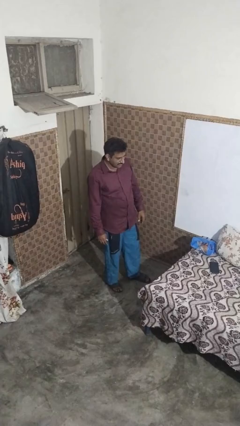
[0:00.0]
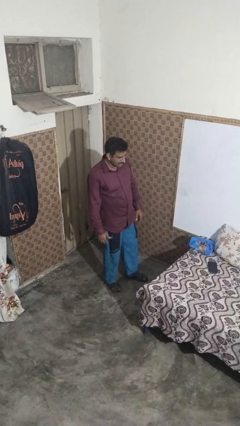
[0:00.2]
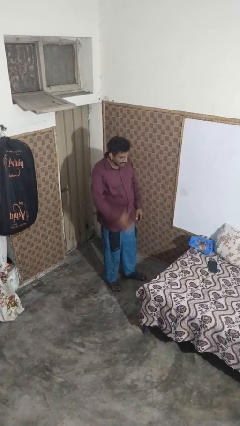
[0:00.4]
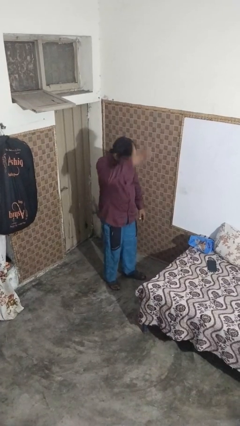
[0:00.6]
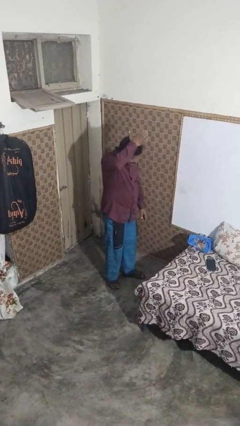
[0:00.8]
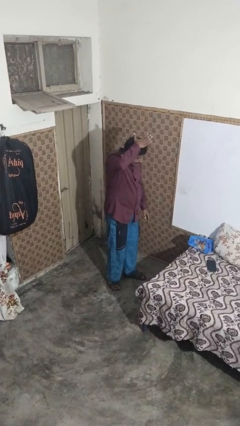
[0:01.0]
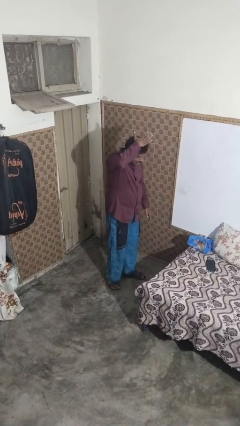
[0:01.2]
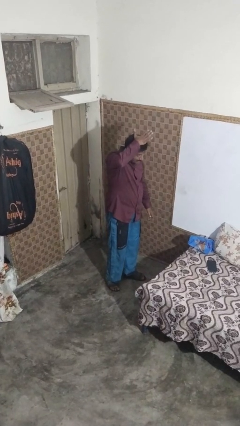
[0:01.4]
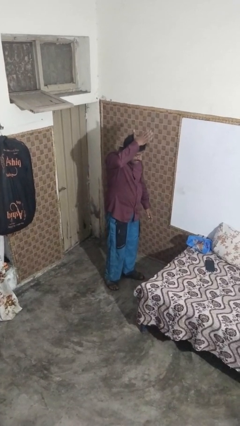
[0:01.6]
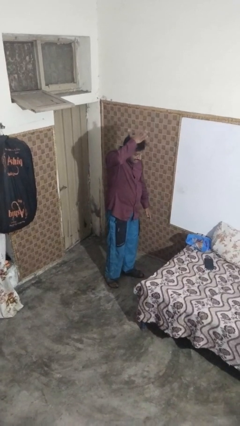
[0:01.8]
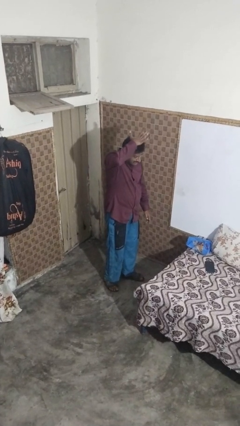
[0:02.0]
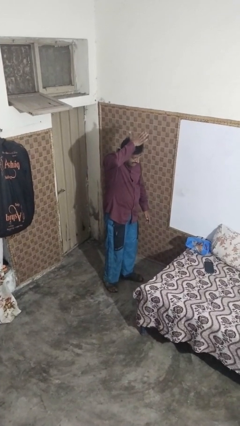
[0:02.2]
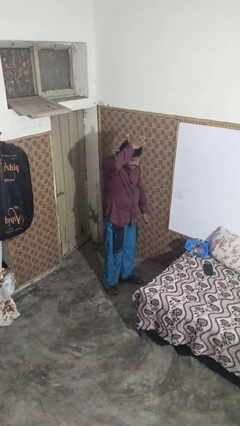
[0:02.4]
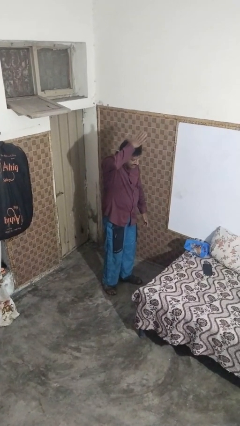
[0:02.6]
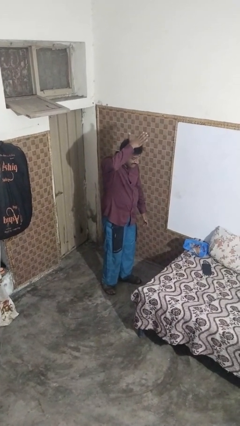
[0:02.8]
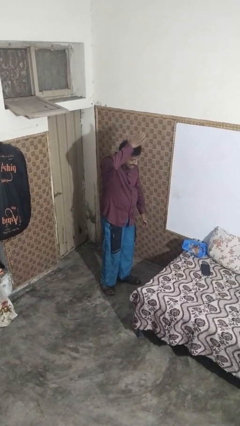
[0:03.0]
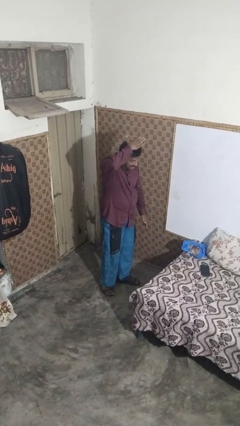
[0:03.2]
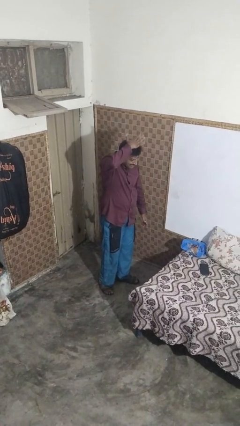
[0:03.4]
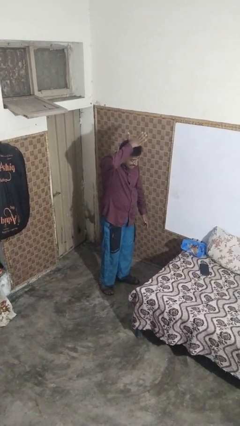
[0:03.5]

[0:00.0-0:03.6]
person pats head

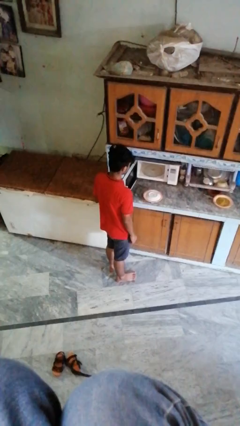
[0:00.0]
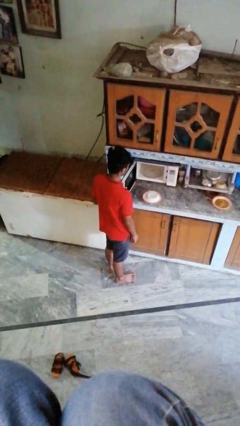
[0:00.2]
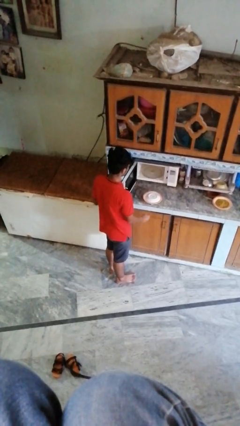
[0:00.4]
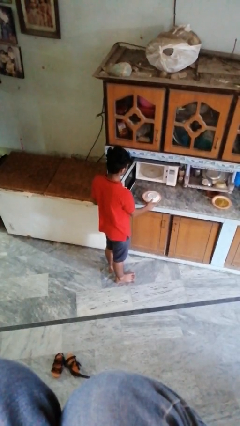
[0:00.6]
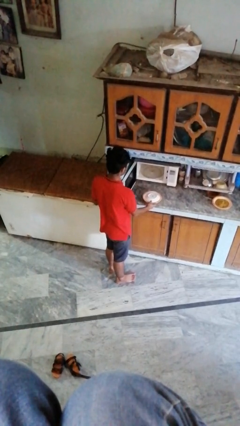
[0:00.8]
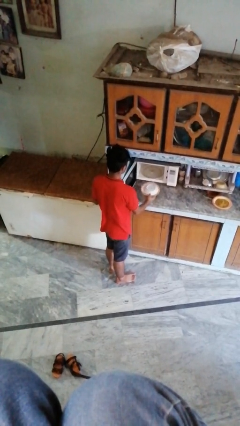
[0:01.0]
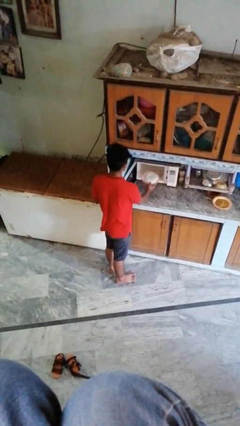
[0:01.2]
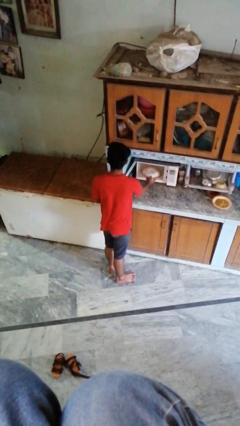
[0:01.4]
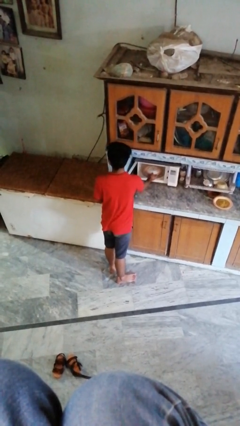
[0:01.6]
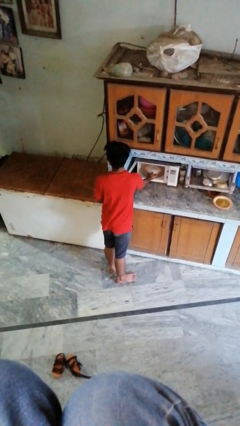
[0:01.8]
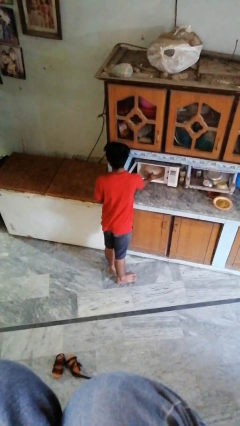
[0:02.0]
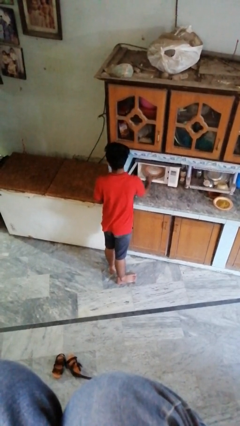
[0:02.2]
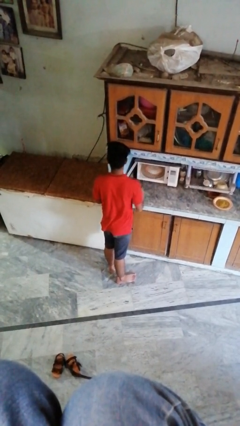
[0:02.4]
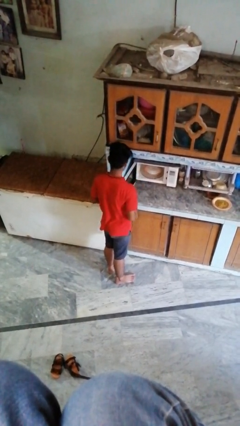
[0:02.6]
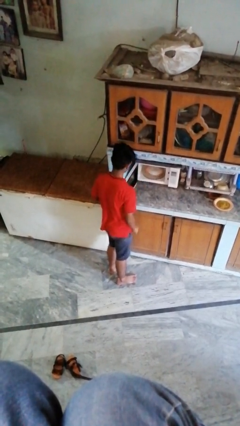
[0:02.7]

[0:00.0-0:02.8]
person puts object into oven

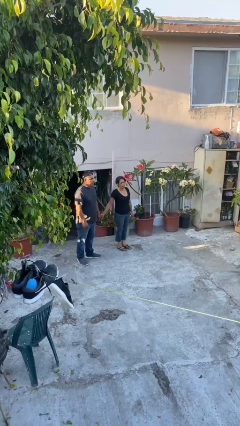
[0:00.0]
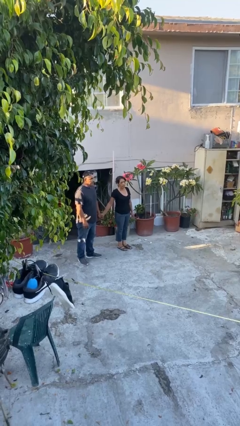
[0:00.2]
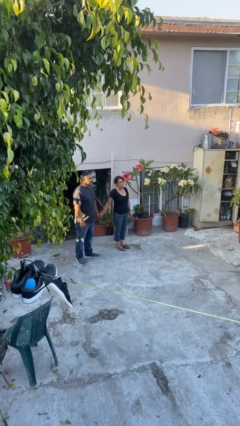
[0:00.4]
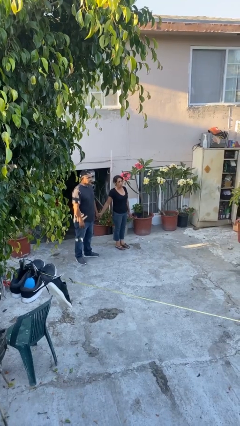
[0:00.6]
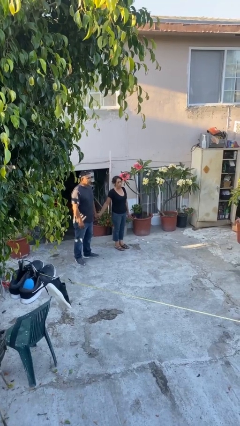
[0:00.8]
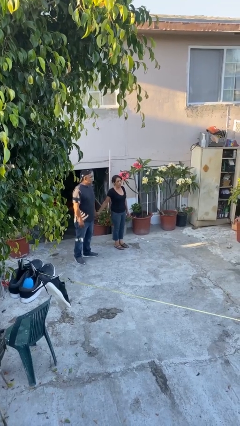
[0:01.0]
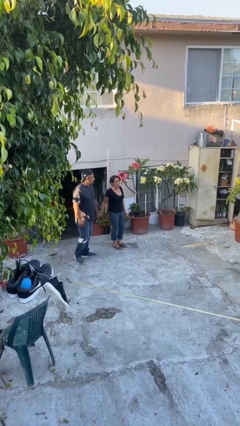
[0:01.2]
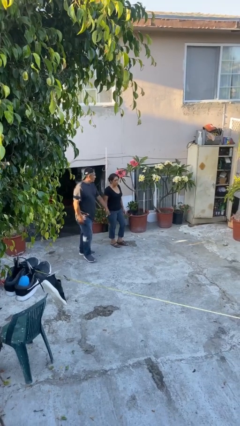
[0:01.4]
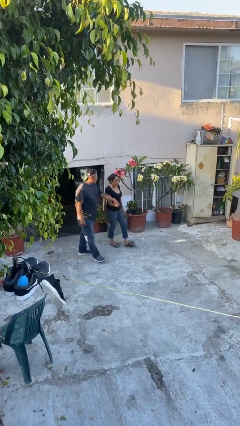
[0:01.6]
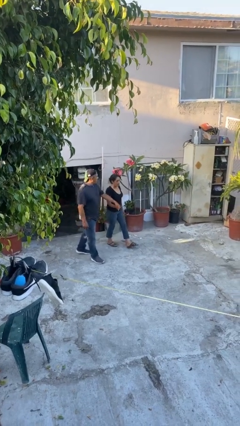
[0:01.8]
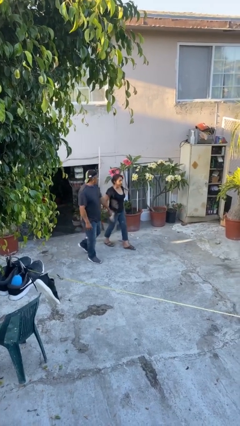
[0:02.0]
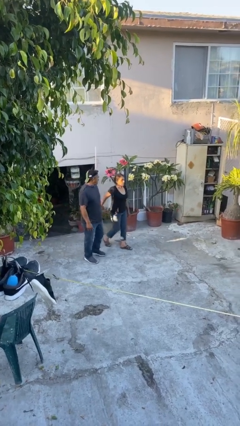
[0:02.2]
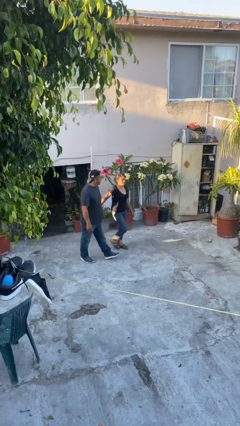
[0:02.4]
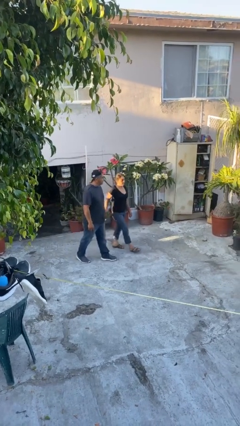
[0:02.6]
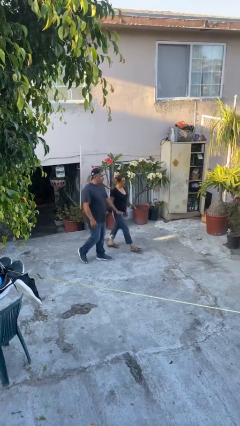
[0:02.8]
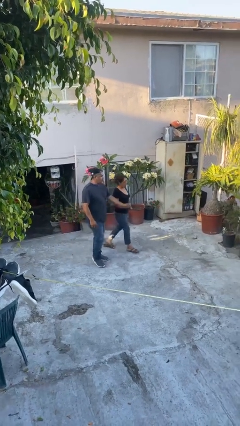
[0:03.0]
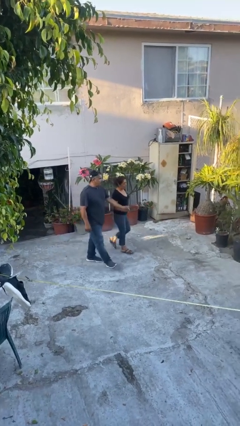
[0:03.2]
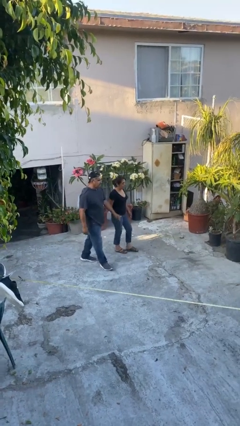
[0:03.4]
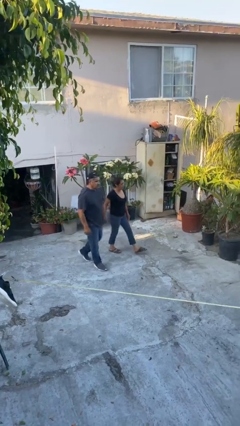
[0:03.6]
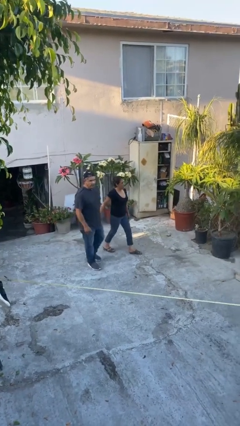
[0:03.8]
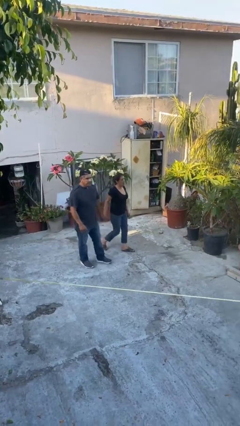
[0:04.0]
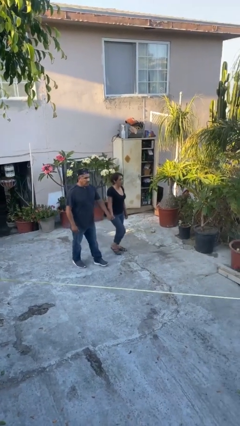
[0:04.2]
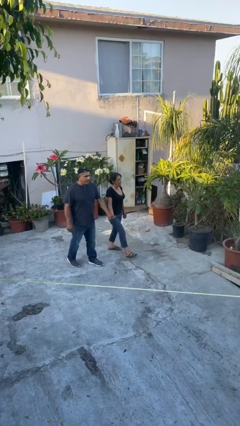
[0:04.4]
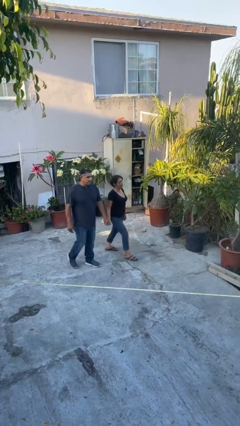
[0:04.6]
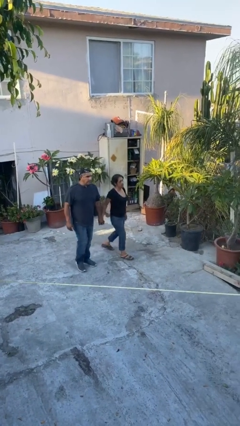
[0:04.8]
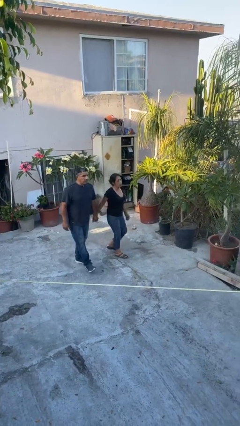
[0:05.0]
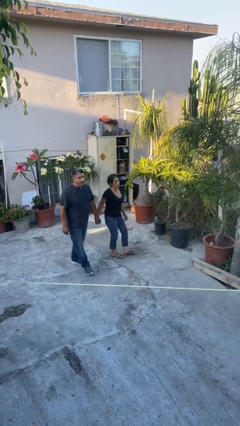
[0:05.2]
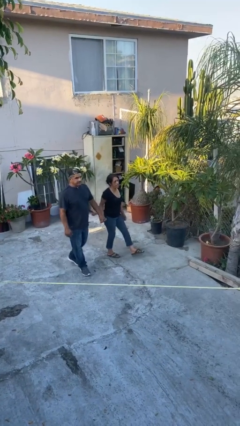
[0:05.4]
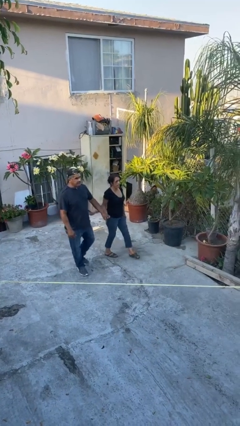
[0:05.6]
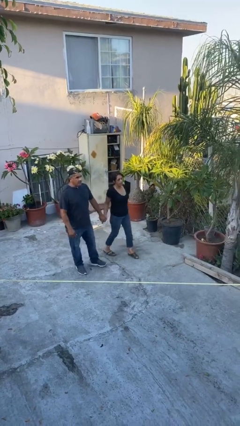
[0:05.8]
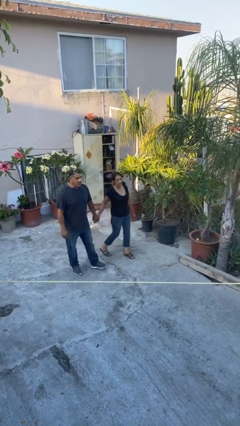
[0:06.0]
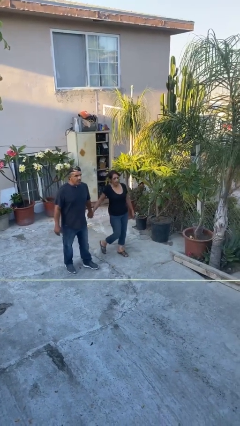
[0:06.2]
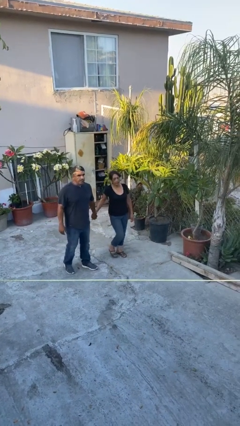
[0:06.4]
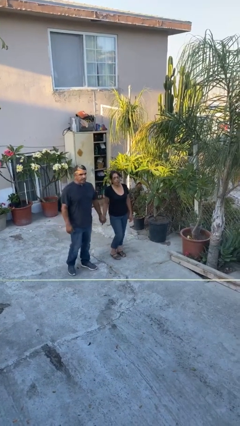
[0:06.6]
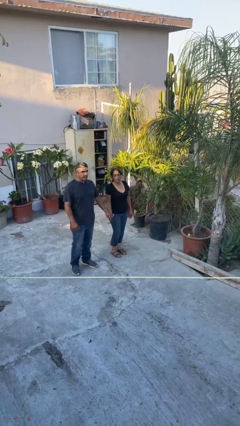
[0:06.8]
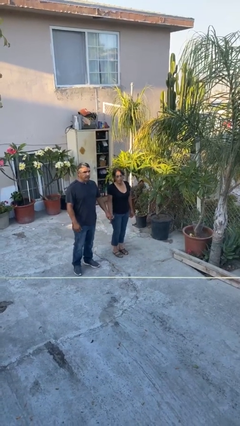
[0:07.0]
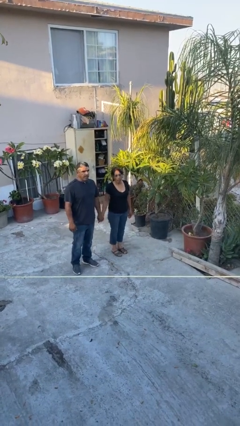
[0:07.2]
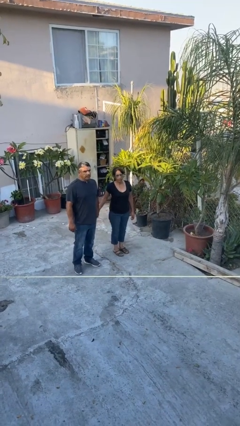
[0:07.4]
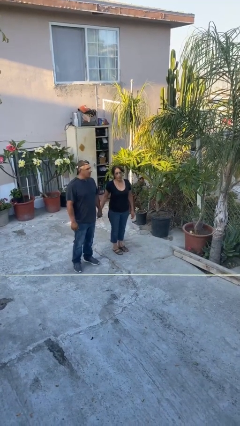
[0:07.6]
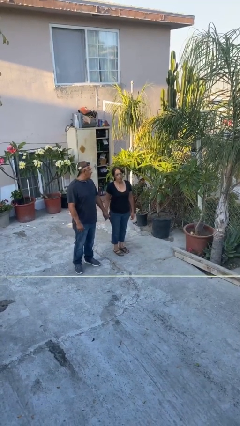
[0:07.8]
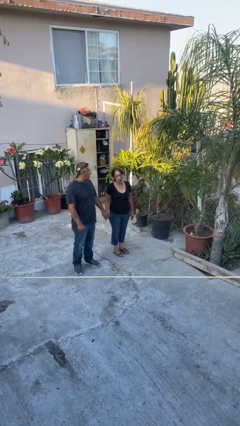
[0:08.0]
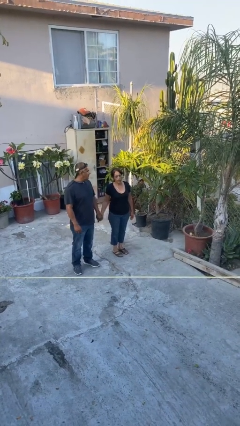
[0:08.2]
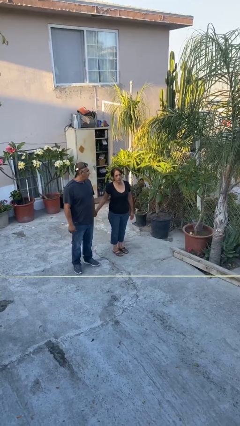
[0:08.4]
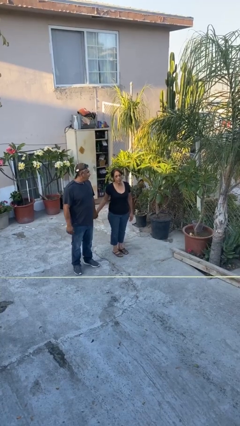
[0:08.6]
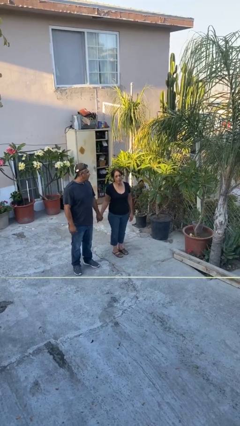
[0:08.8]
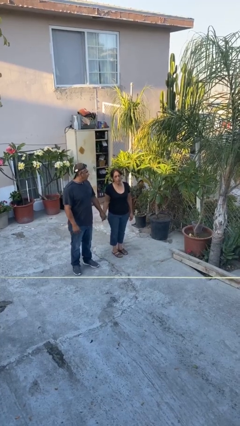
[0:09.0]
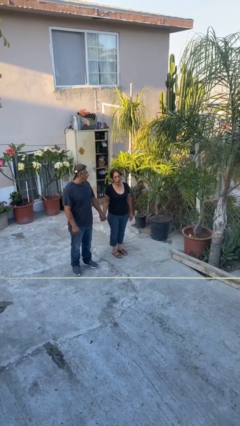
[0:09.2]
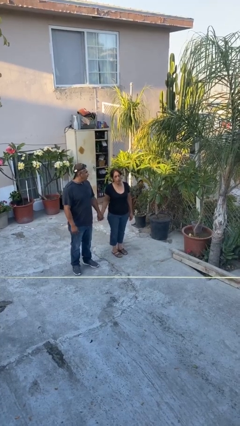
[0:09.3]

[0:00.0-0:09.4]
person holds hand

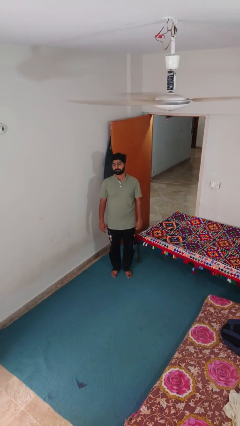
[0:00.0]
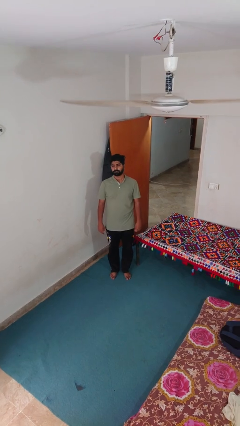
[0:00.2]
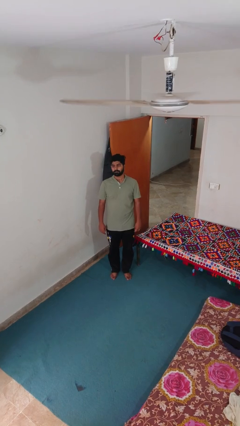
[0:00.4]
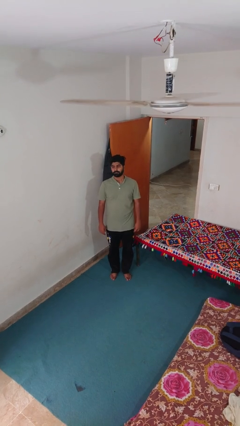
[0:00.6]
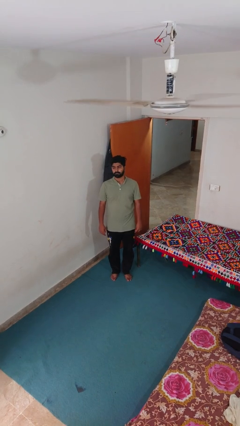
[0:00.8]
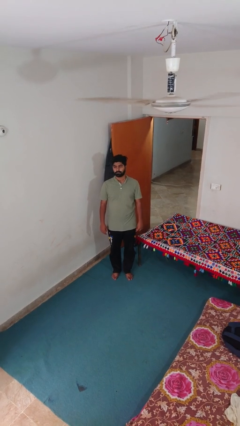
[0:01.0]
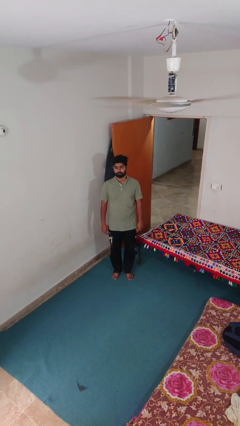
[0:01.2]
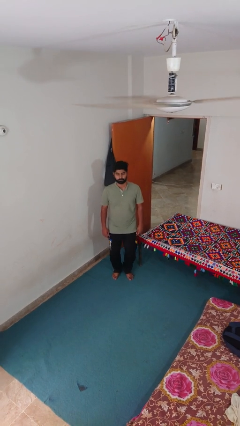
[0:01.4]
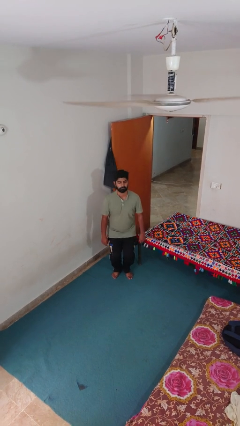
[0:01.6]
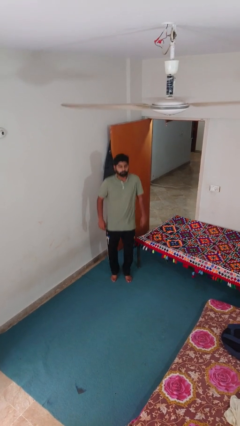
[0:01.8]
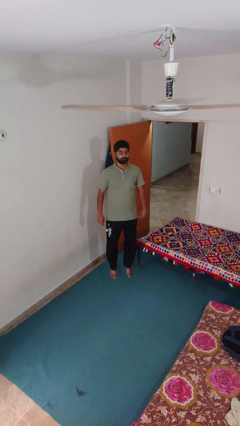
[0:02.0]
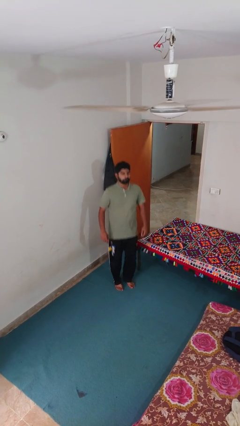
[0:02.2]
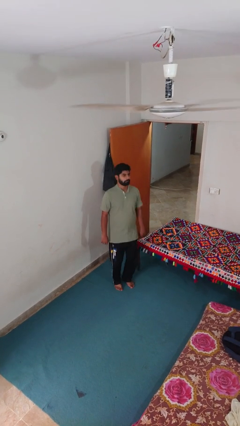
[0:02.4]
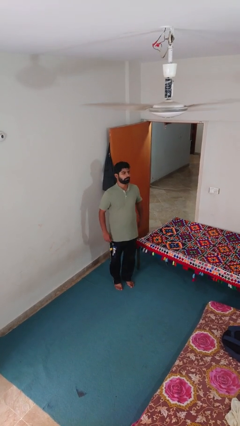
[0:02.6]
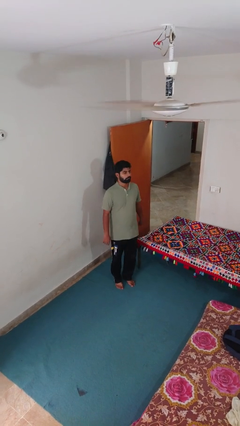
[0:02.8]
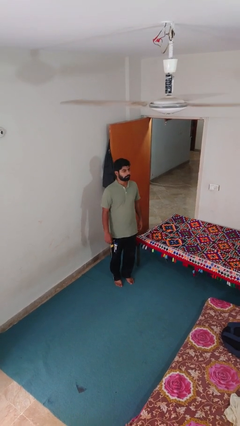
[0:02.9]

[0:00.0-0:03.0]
person jumps
